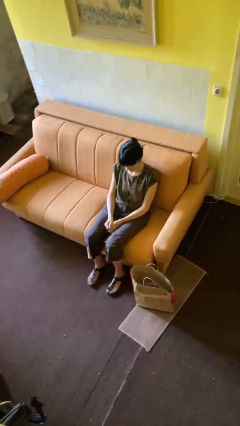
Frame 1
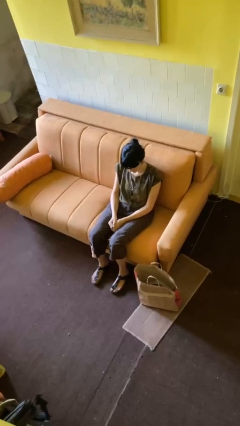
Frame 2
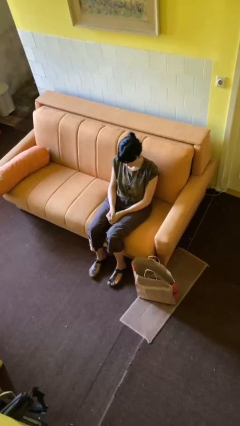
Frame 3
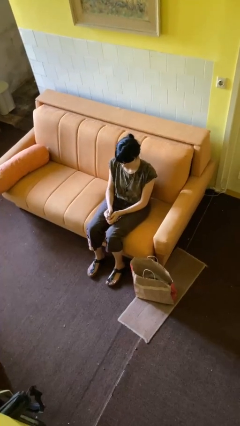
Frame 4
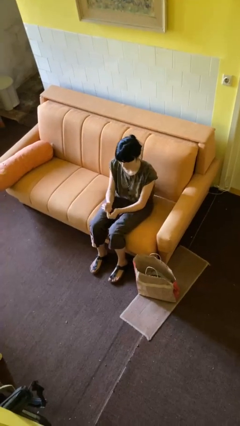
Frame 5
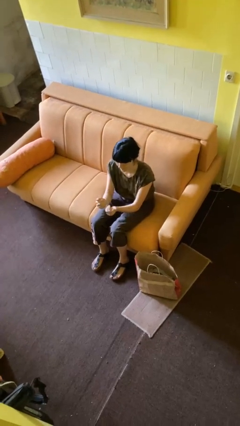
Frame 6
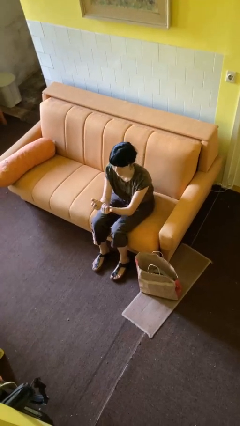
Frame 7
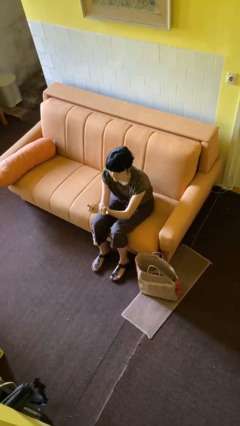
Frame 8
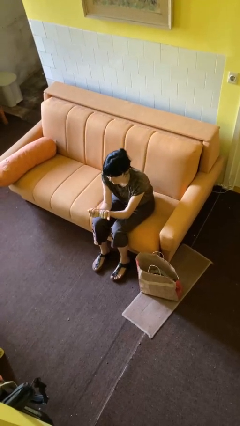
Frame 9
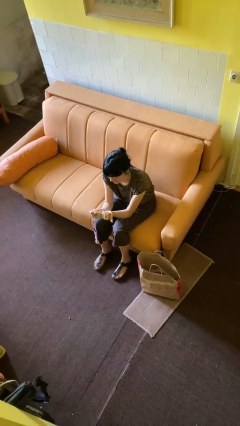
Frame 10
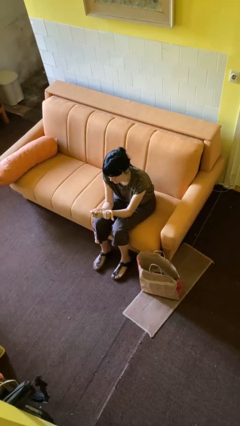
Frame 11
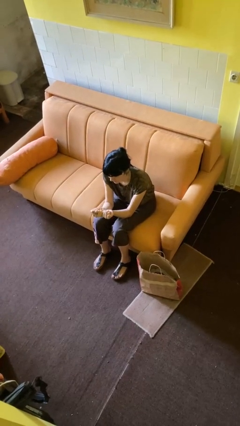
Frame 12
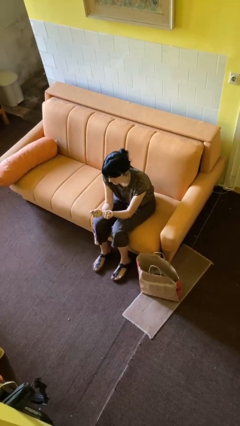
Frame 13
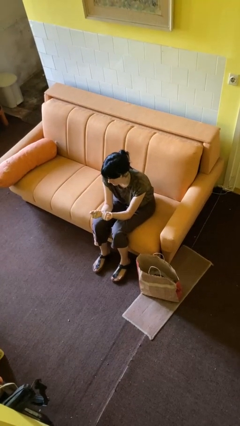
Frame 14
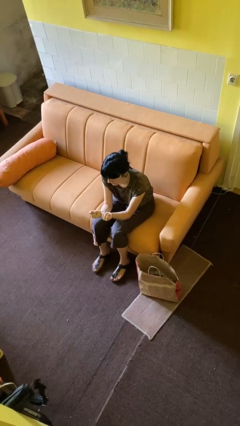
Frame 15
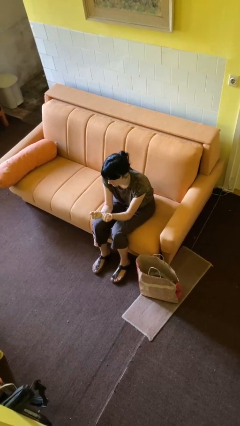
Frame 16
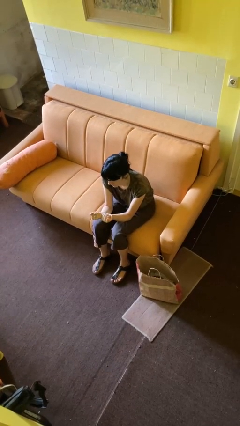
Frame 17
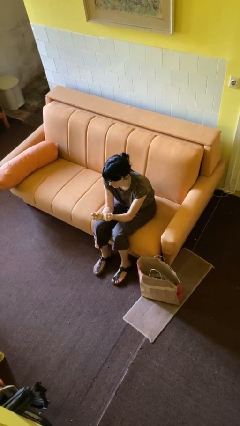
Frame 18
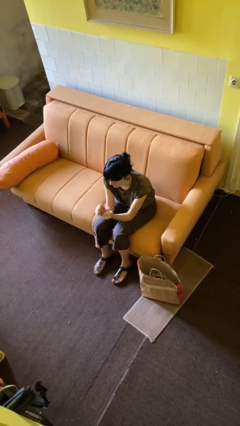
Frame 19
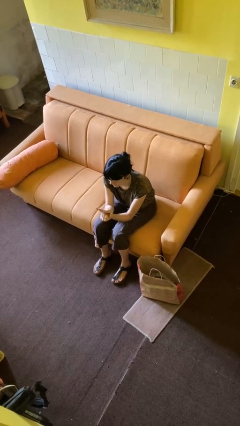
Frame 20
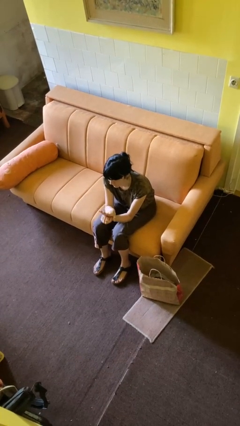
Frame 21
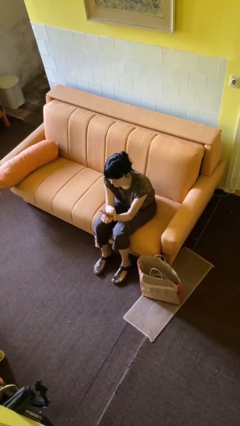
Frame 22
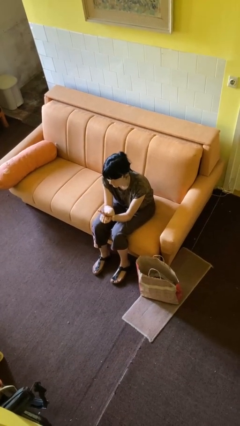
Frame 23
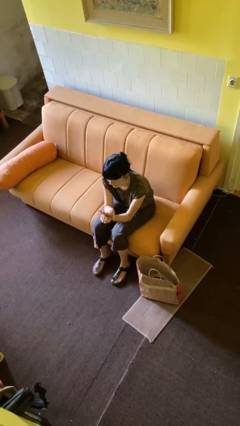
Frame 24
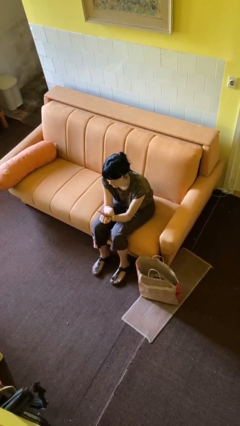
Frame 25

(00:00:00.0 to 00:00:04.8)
person looks at hands in lap

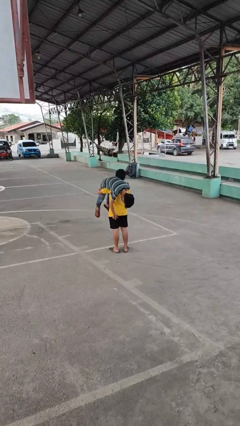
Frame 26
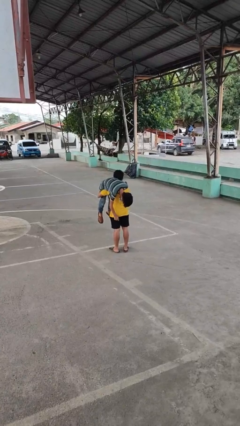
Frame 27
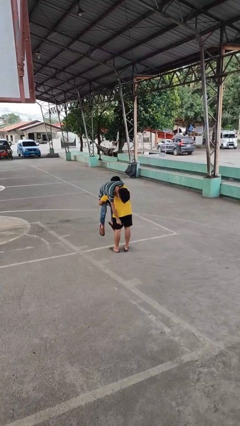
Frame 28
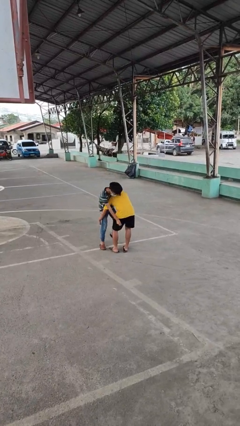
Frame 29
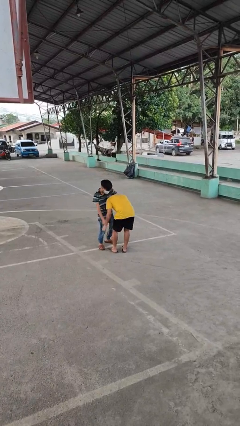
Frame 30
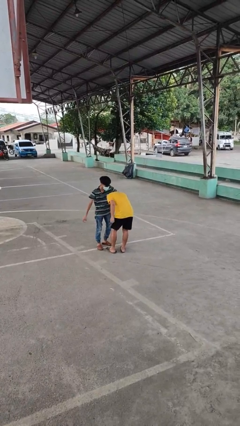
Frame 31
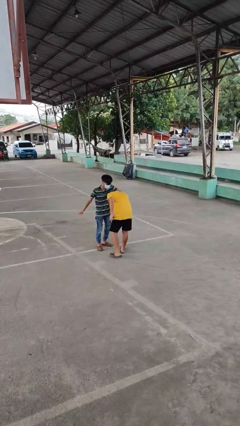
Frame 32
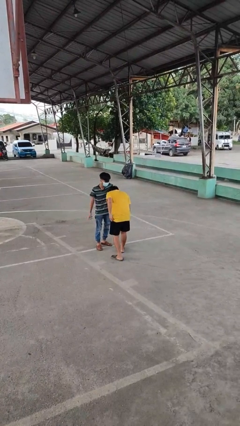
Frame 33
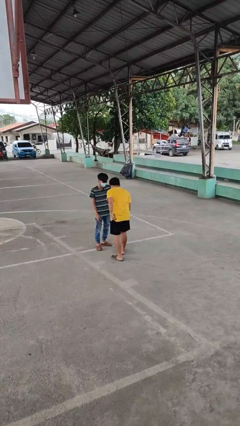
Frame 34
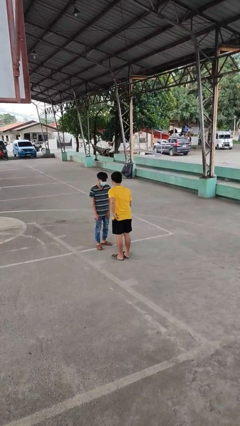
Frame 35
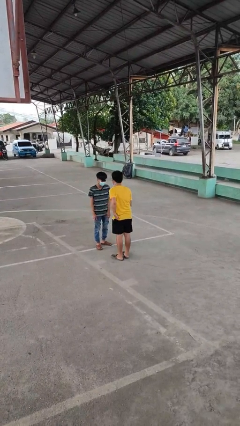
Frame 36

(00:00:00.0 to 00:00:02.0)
person puts down person

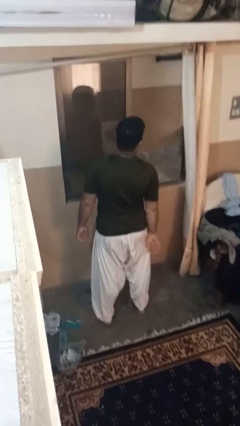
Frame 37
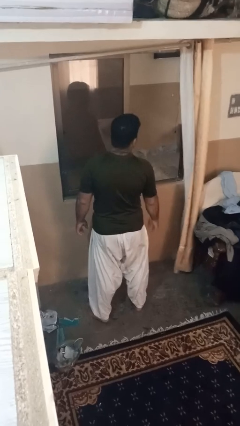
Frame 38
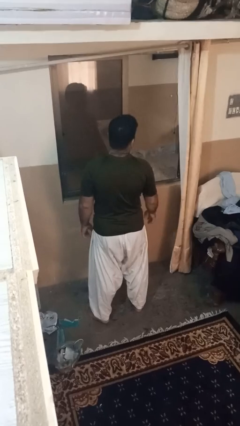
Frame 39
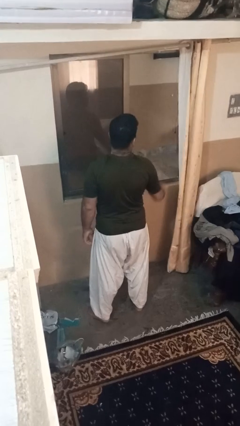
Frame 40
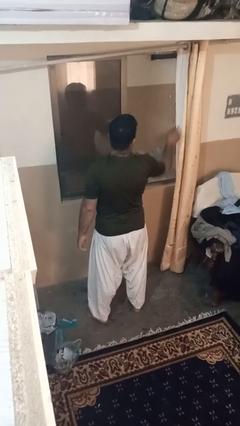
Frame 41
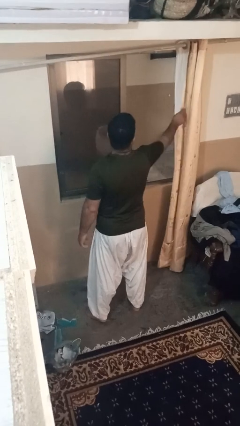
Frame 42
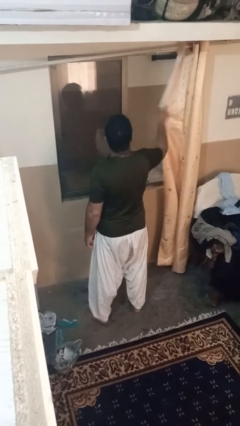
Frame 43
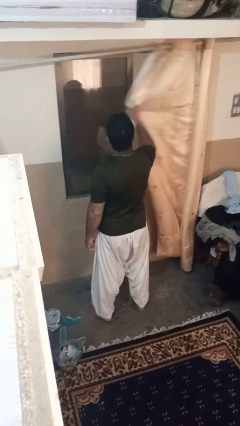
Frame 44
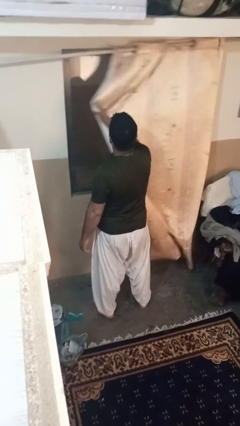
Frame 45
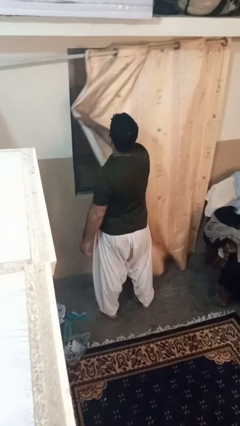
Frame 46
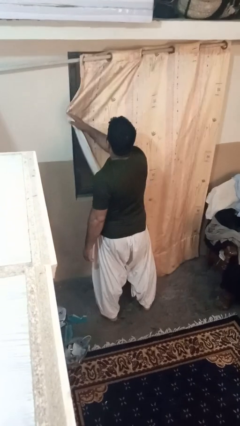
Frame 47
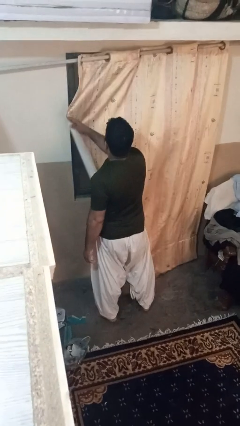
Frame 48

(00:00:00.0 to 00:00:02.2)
person closes curtains

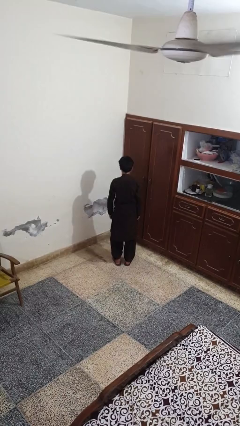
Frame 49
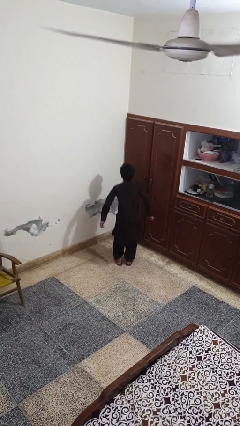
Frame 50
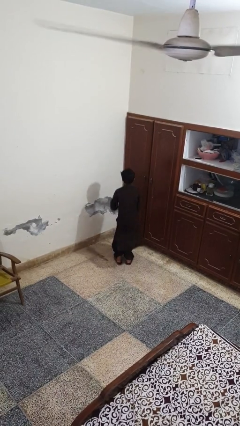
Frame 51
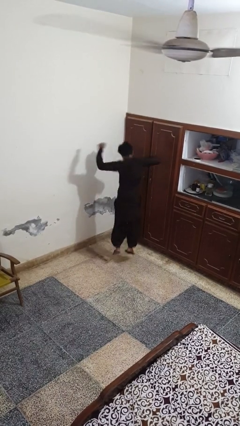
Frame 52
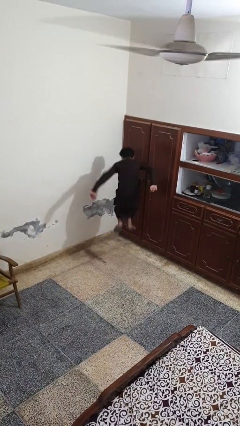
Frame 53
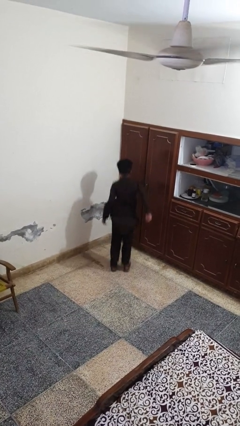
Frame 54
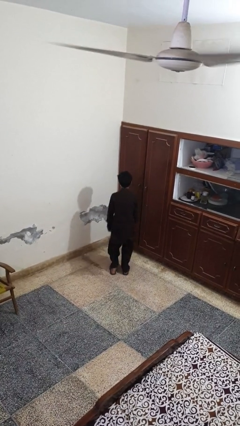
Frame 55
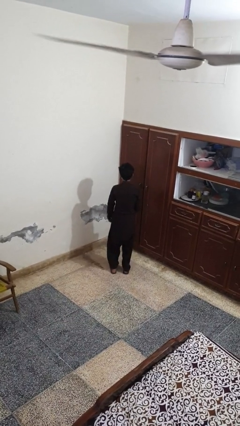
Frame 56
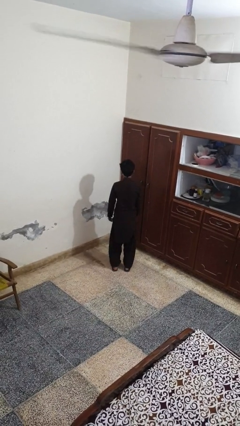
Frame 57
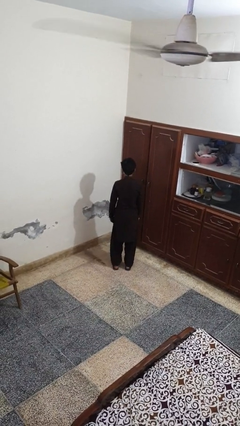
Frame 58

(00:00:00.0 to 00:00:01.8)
person jumps

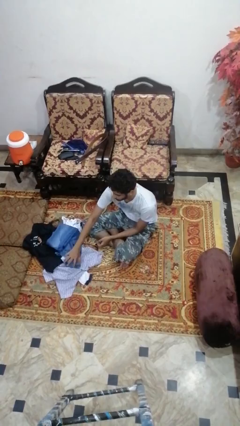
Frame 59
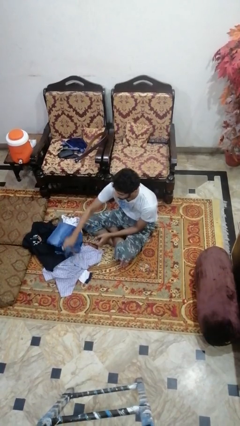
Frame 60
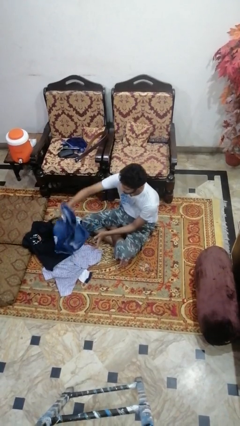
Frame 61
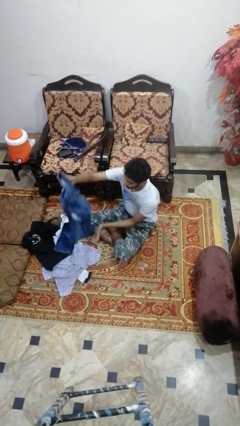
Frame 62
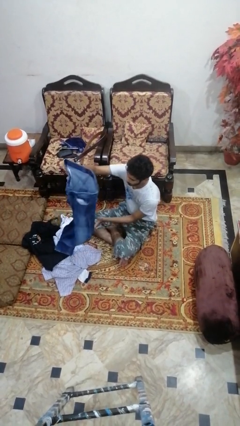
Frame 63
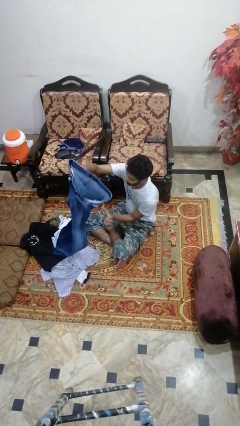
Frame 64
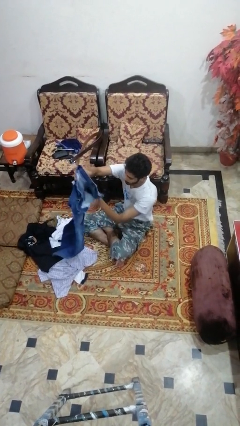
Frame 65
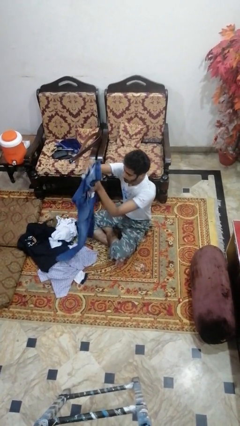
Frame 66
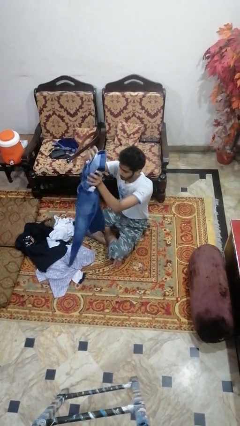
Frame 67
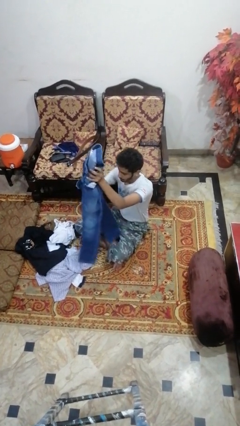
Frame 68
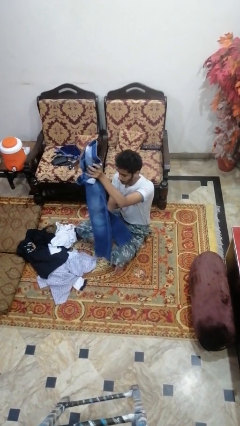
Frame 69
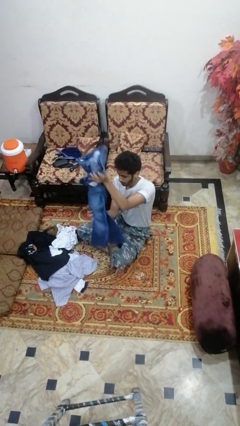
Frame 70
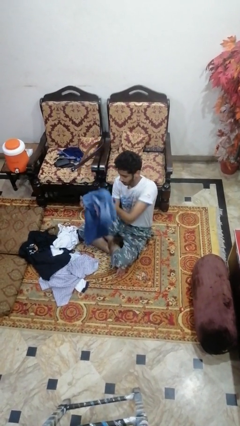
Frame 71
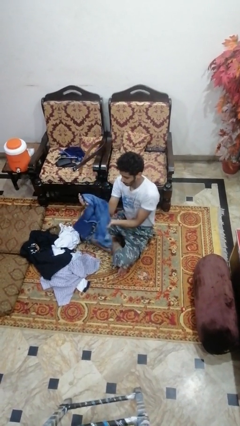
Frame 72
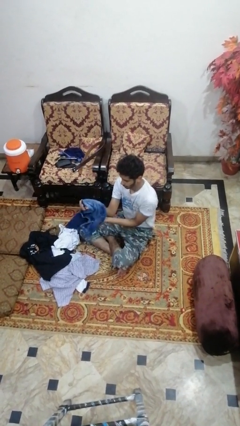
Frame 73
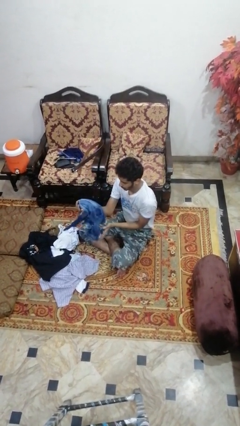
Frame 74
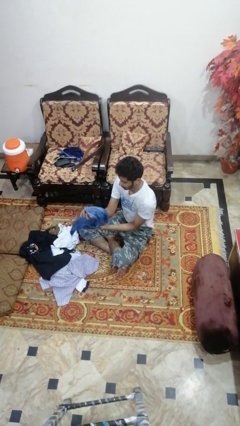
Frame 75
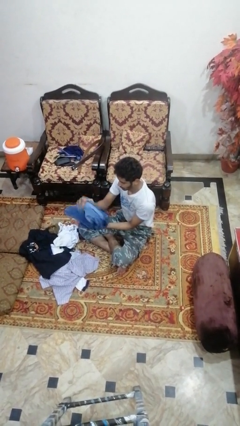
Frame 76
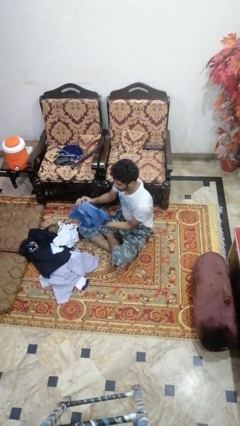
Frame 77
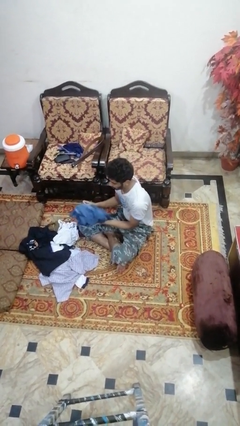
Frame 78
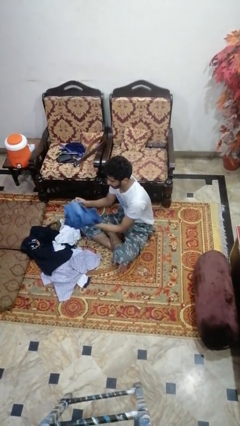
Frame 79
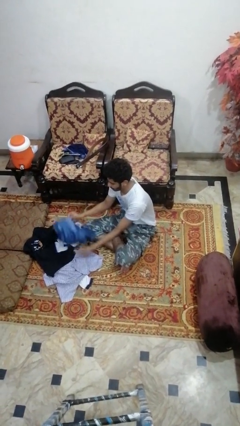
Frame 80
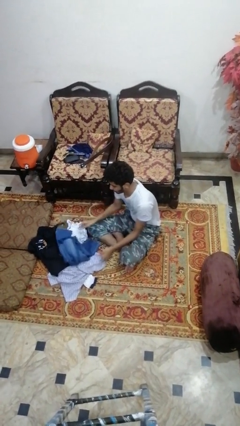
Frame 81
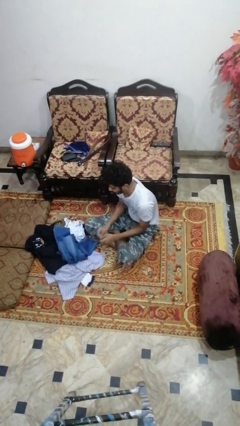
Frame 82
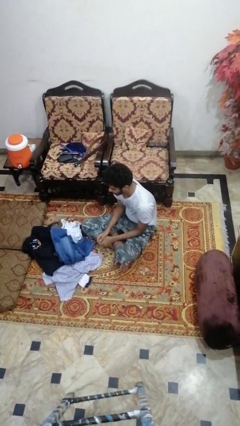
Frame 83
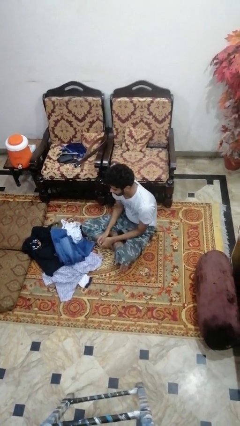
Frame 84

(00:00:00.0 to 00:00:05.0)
person folds pants

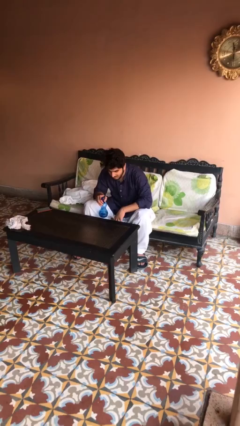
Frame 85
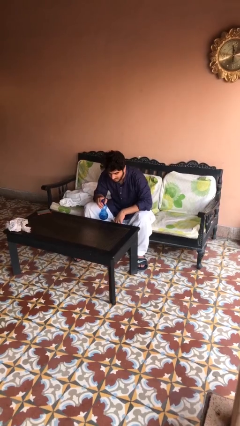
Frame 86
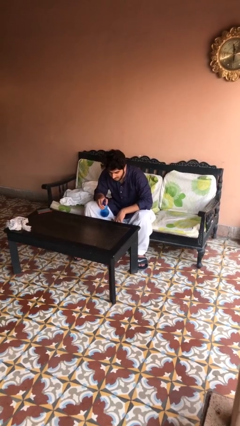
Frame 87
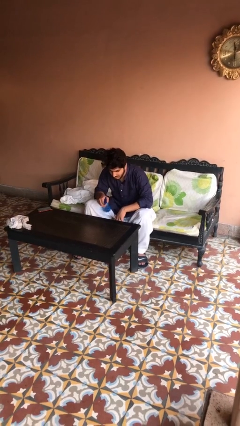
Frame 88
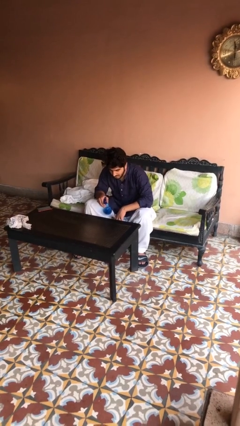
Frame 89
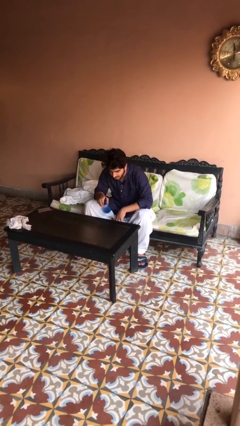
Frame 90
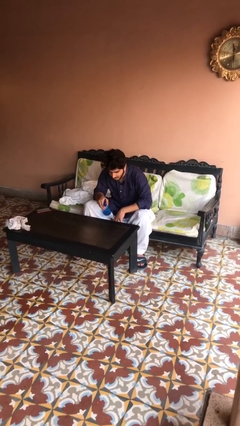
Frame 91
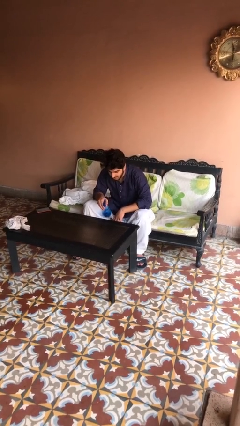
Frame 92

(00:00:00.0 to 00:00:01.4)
person sprays from bottle
